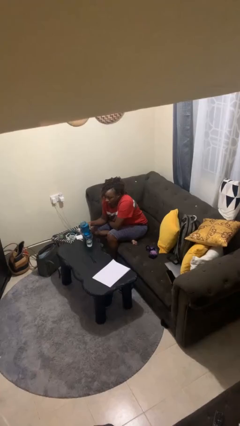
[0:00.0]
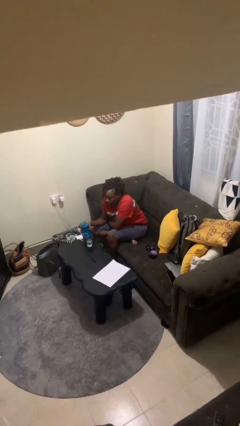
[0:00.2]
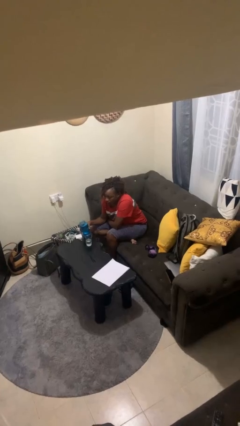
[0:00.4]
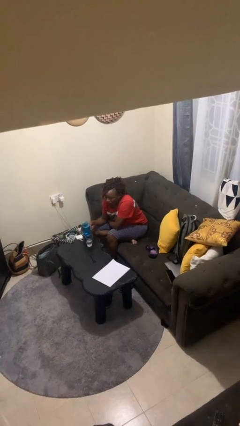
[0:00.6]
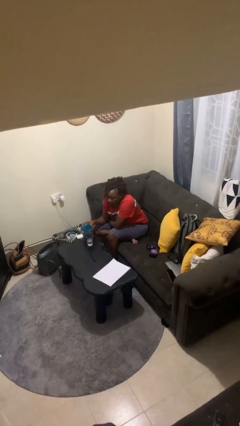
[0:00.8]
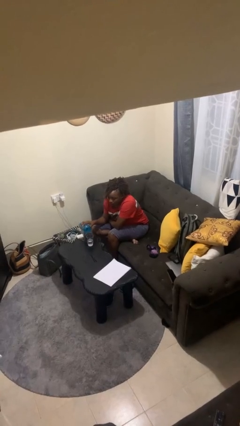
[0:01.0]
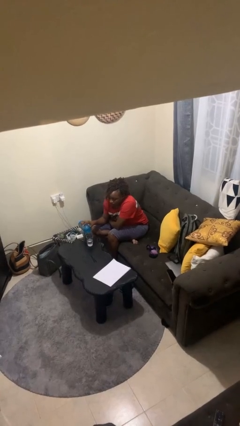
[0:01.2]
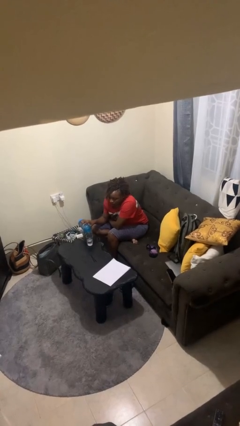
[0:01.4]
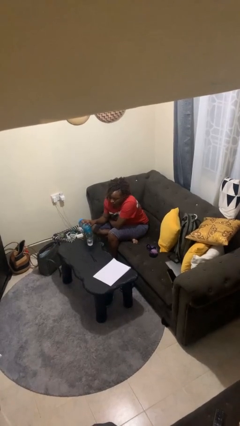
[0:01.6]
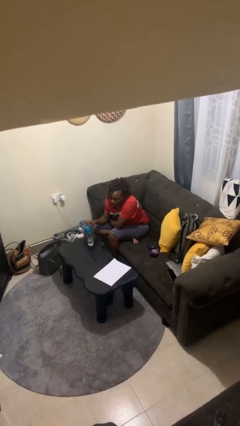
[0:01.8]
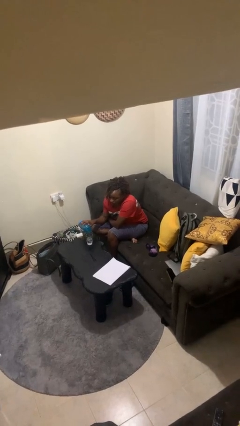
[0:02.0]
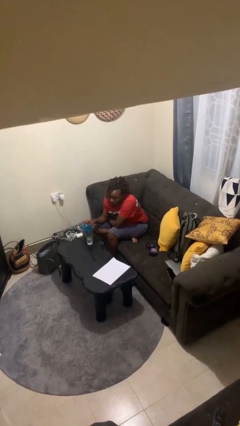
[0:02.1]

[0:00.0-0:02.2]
person pours liquid into cup

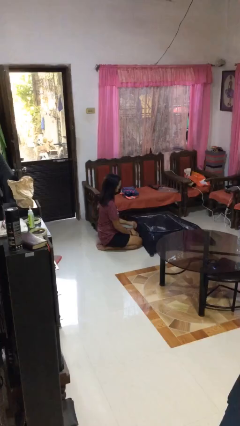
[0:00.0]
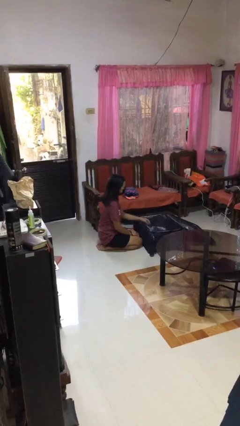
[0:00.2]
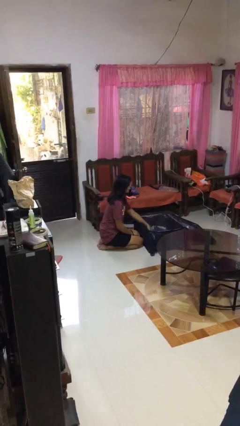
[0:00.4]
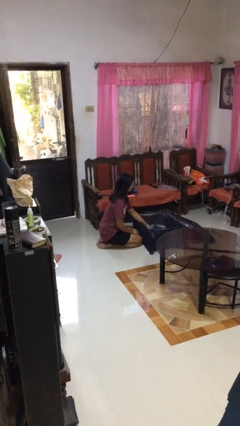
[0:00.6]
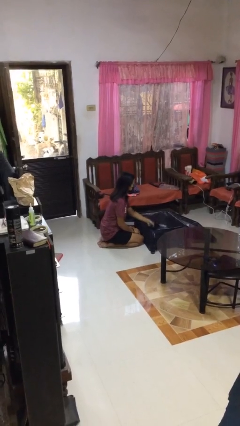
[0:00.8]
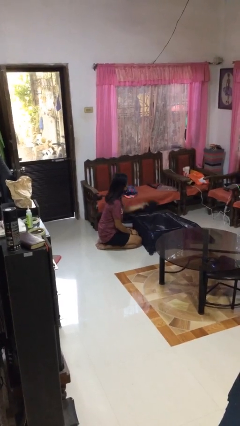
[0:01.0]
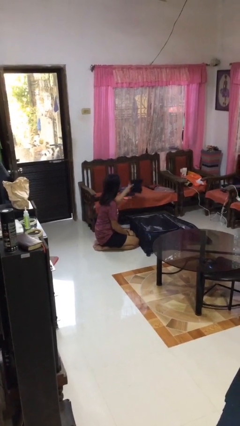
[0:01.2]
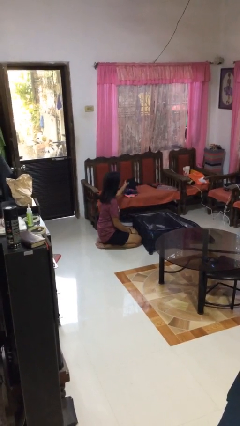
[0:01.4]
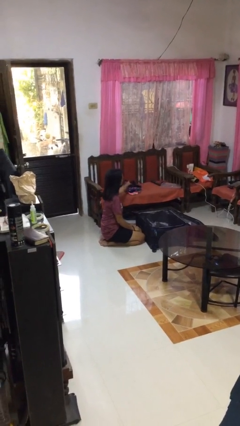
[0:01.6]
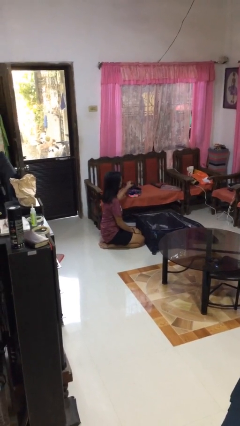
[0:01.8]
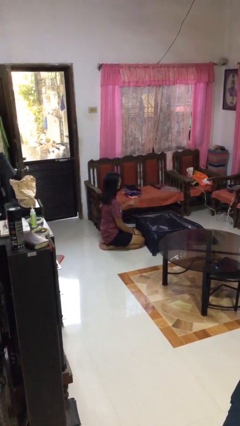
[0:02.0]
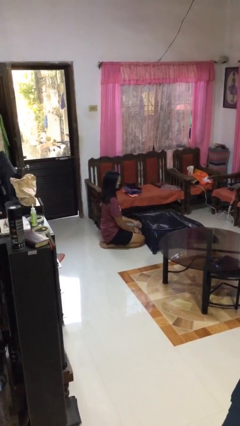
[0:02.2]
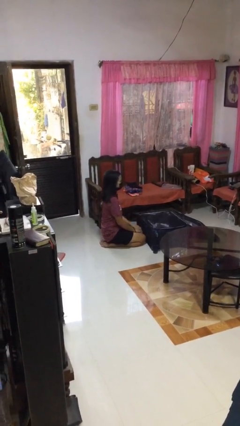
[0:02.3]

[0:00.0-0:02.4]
person unloads clothes from suitcase

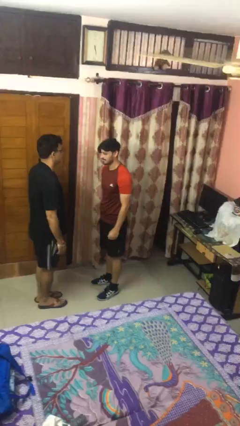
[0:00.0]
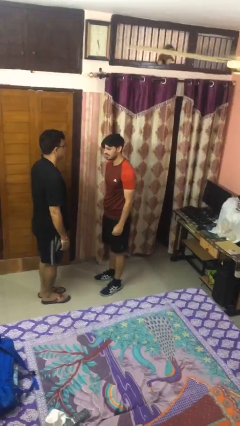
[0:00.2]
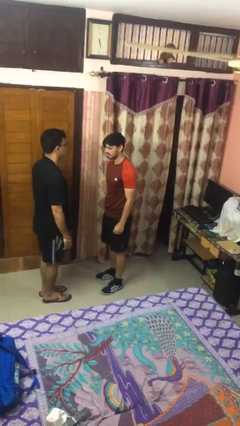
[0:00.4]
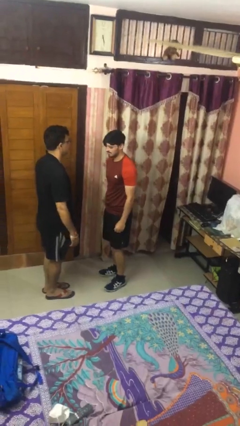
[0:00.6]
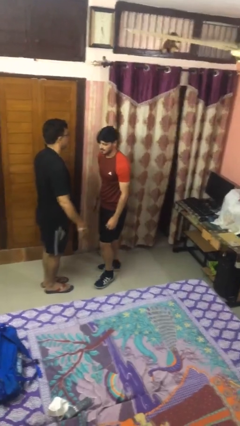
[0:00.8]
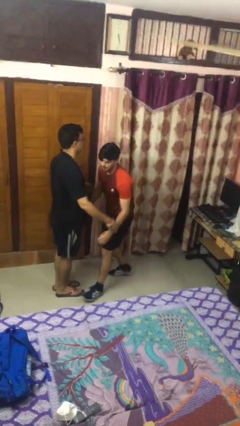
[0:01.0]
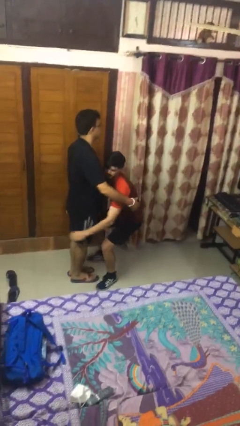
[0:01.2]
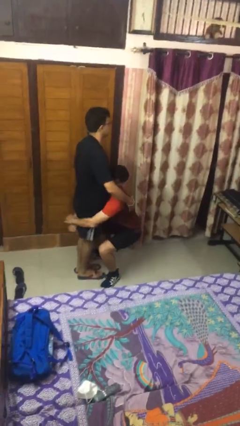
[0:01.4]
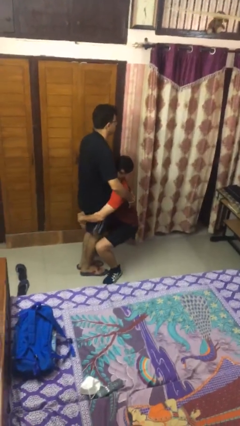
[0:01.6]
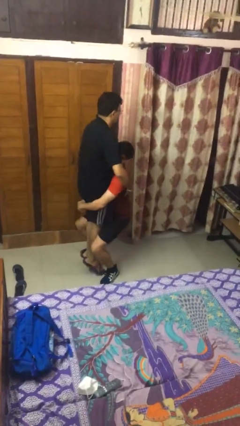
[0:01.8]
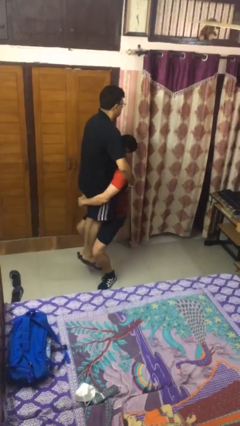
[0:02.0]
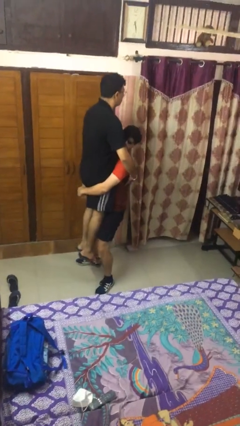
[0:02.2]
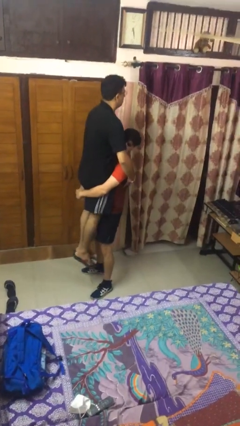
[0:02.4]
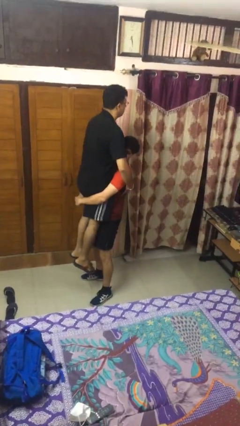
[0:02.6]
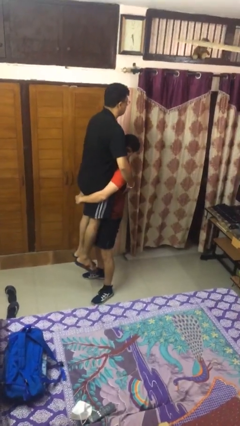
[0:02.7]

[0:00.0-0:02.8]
person picks up person

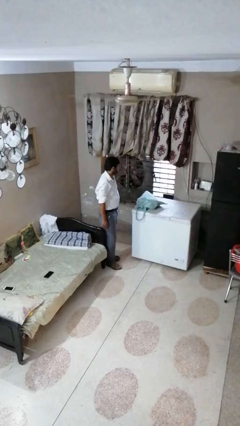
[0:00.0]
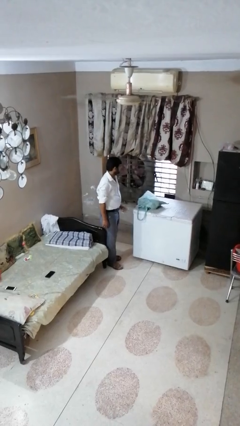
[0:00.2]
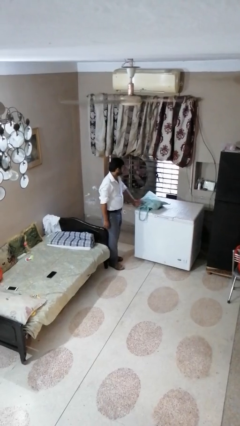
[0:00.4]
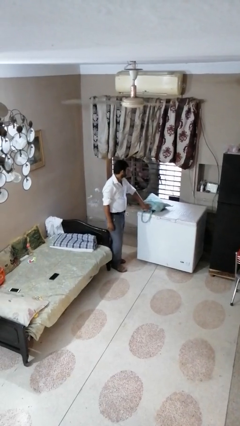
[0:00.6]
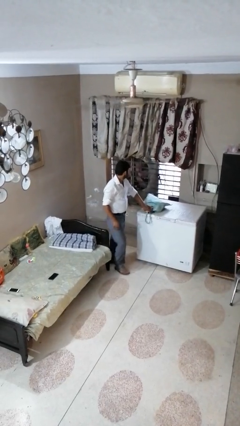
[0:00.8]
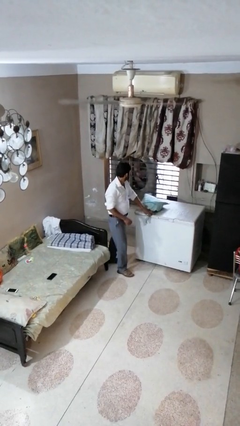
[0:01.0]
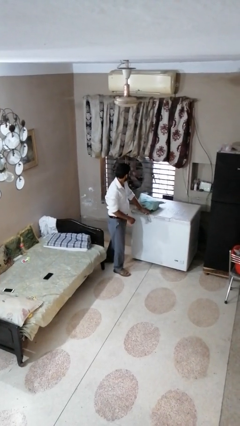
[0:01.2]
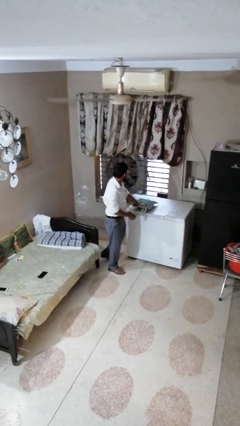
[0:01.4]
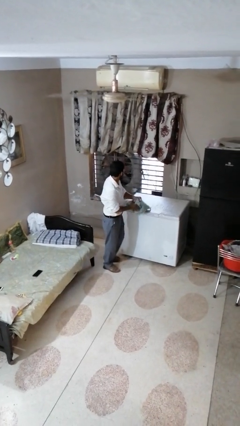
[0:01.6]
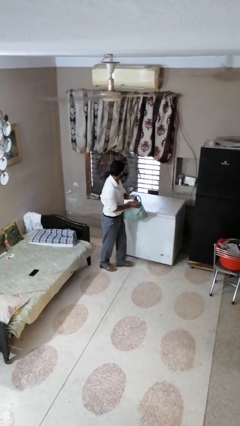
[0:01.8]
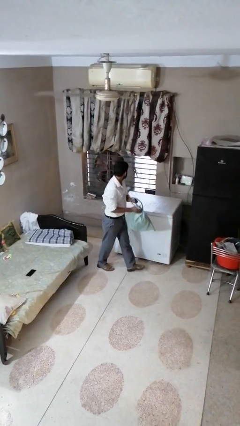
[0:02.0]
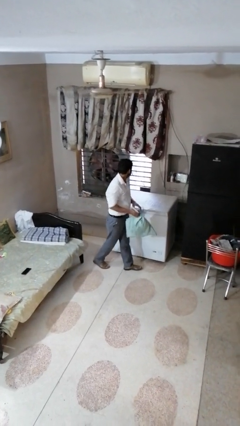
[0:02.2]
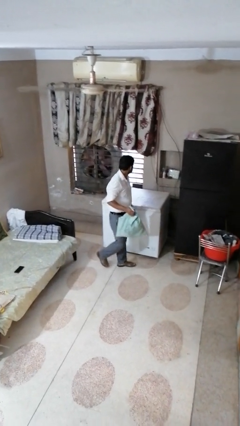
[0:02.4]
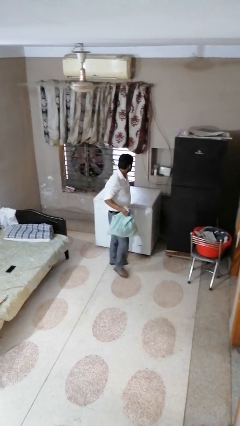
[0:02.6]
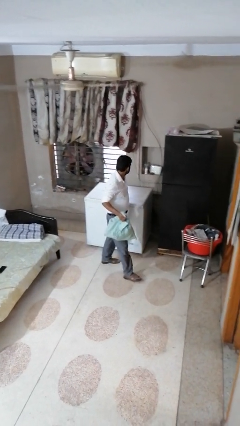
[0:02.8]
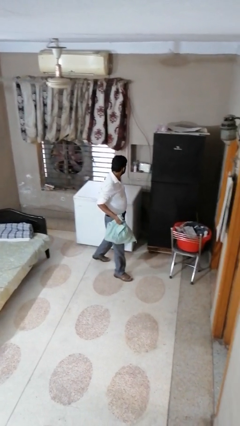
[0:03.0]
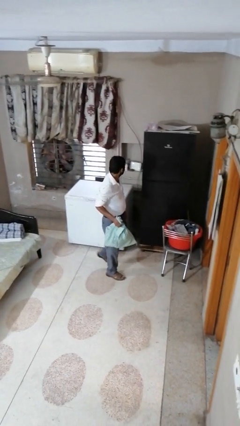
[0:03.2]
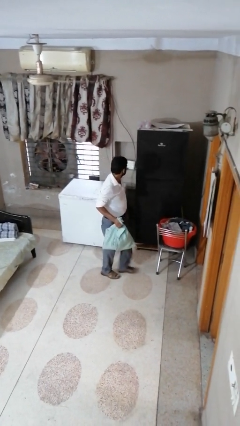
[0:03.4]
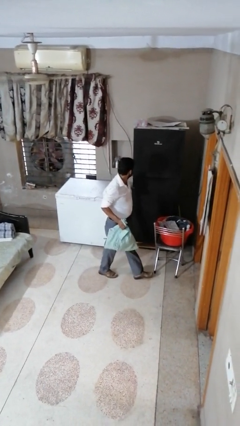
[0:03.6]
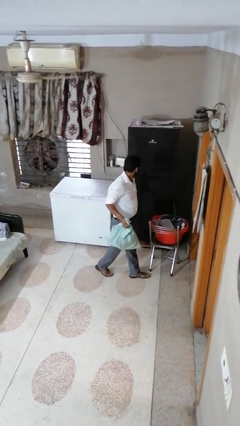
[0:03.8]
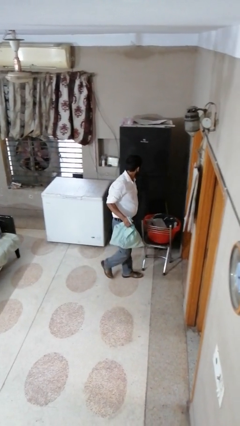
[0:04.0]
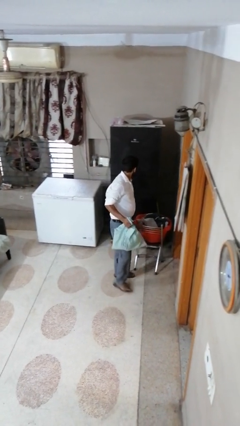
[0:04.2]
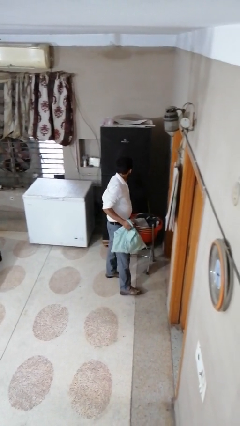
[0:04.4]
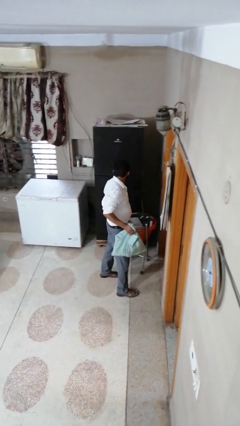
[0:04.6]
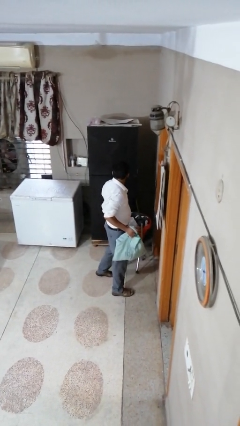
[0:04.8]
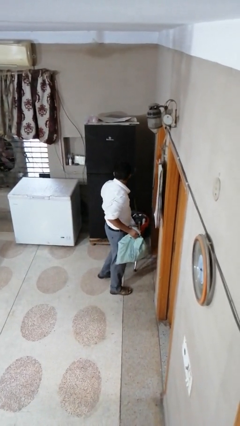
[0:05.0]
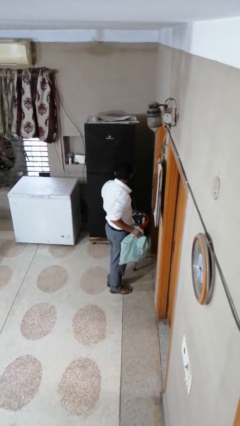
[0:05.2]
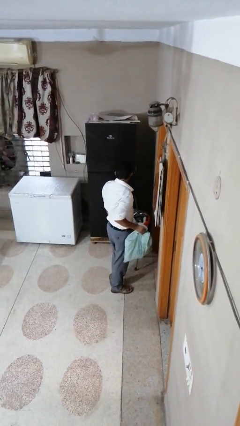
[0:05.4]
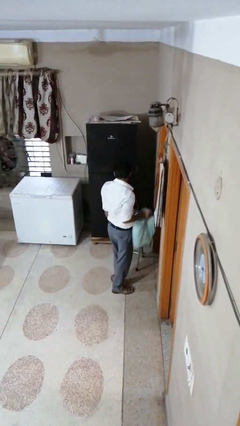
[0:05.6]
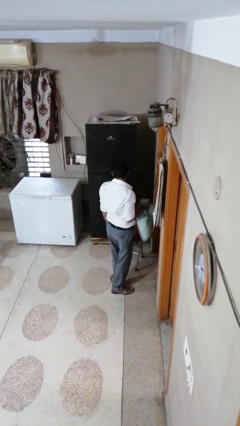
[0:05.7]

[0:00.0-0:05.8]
person carries groceries

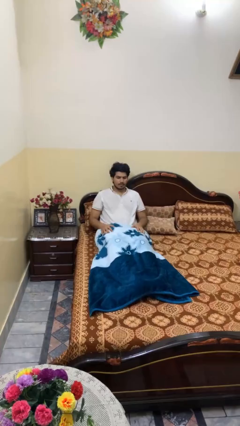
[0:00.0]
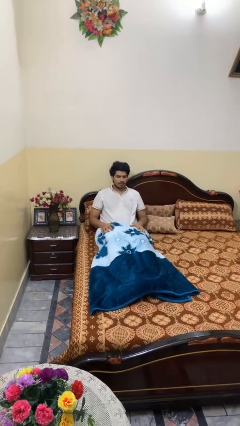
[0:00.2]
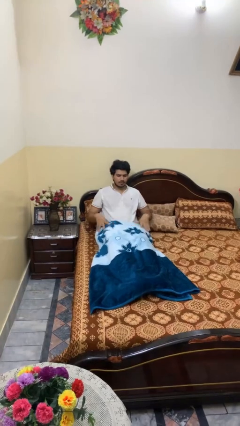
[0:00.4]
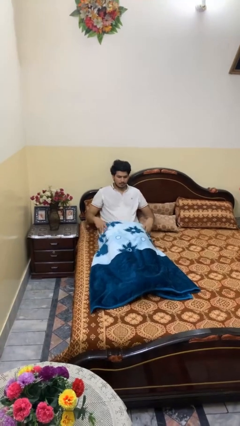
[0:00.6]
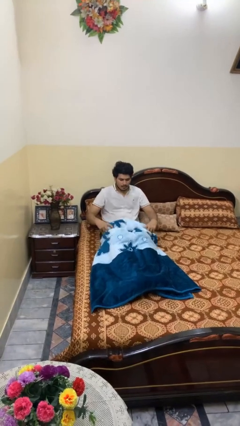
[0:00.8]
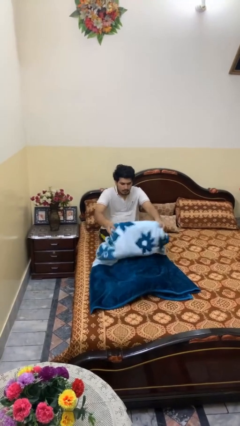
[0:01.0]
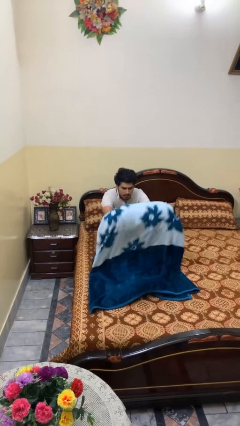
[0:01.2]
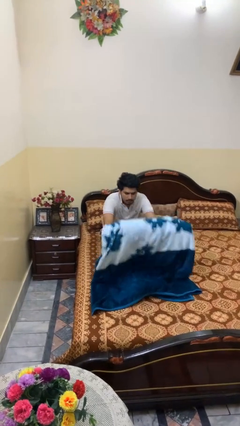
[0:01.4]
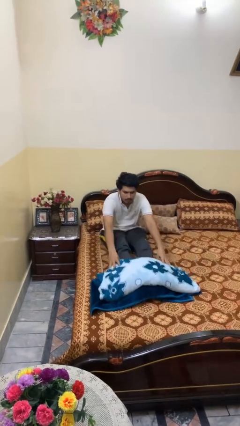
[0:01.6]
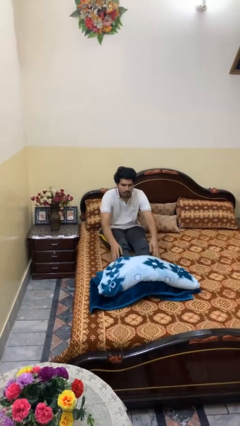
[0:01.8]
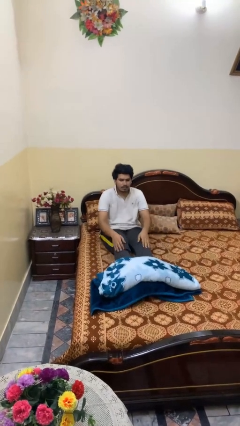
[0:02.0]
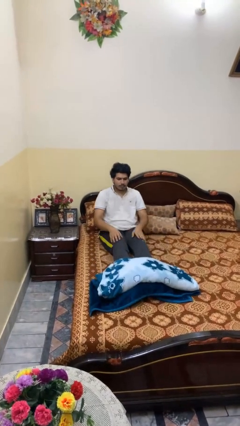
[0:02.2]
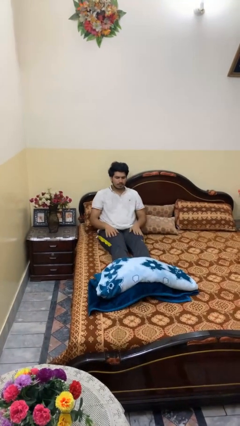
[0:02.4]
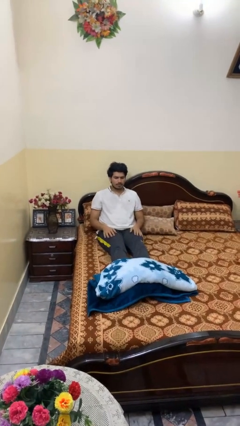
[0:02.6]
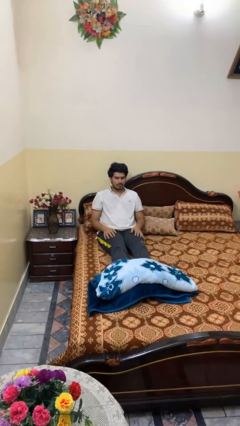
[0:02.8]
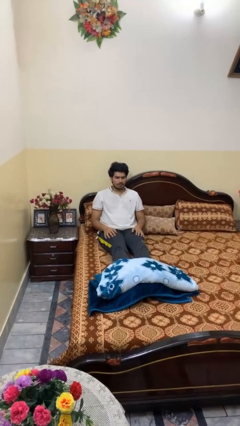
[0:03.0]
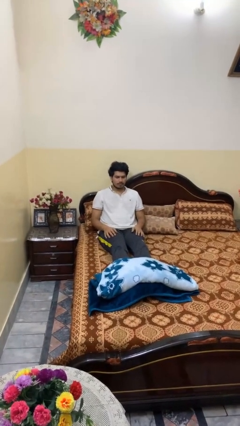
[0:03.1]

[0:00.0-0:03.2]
person uncovers with blanket

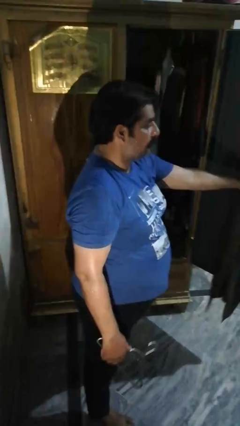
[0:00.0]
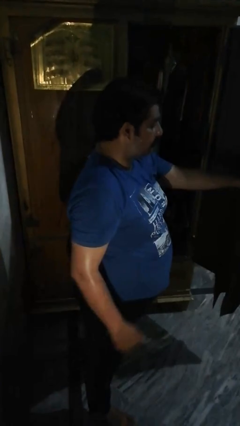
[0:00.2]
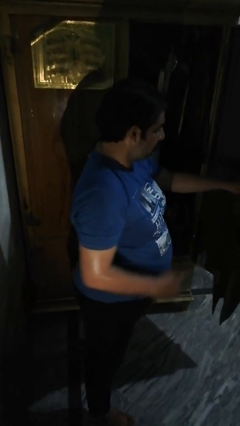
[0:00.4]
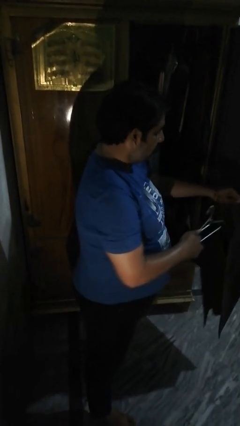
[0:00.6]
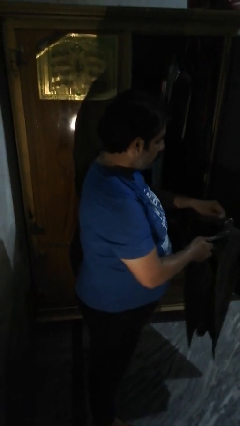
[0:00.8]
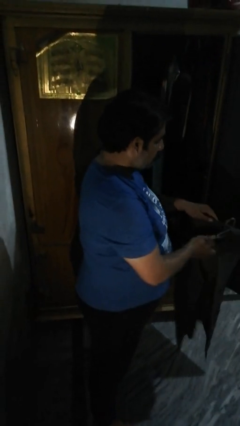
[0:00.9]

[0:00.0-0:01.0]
person puts clothes into closet
